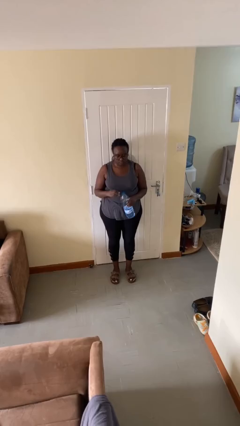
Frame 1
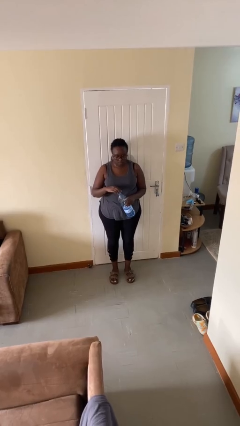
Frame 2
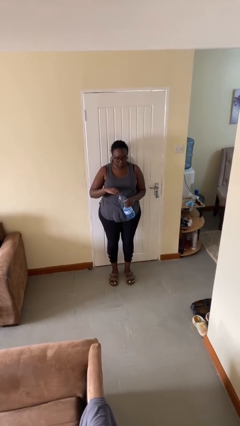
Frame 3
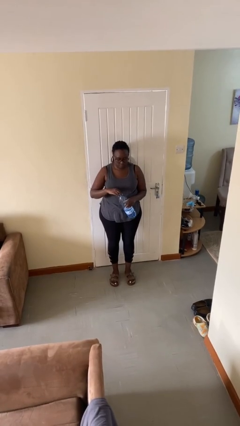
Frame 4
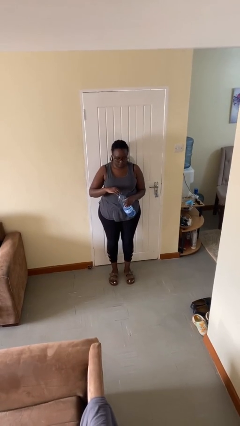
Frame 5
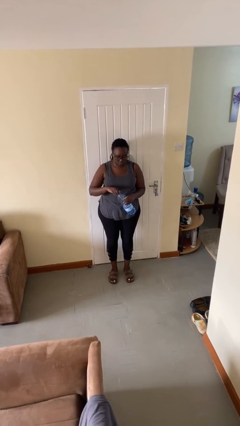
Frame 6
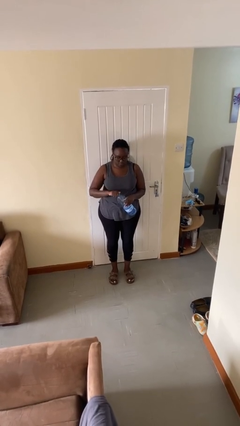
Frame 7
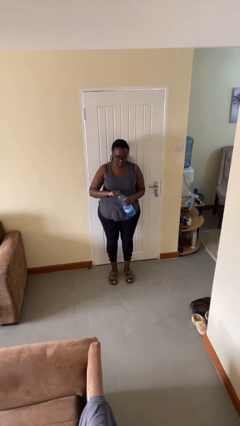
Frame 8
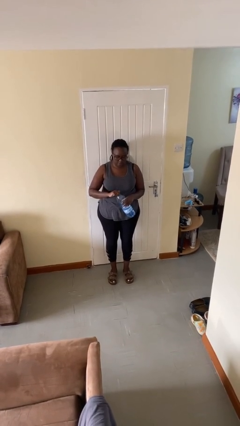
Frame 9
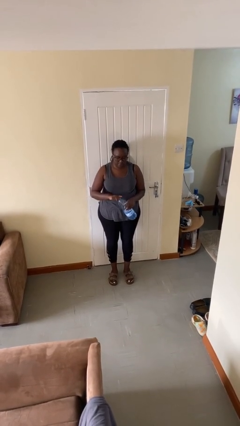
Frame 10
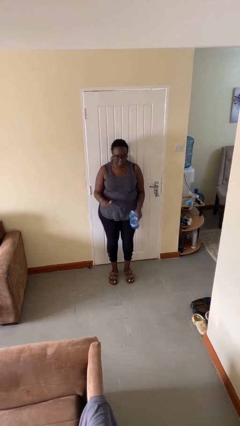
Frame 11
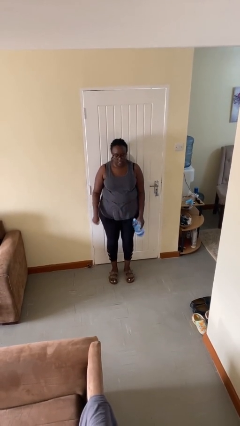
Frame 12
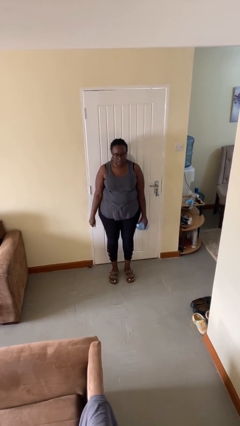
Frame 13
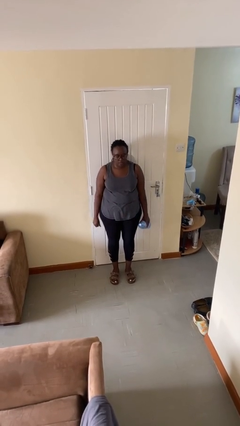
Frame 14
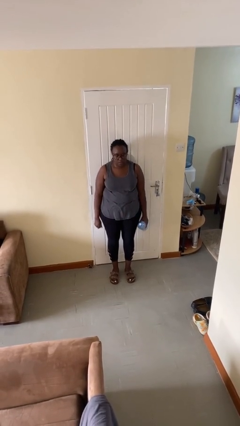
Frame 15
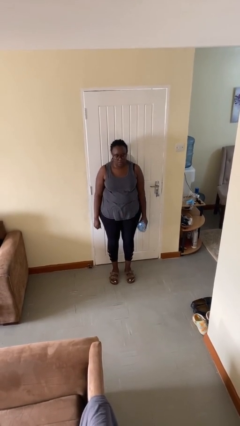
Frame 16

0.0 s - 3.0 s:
person screws lid to bottle

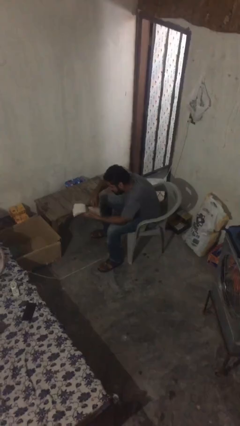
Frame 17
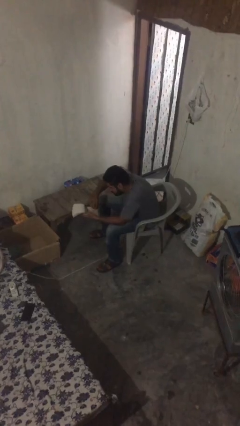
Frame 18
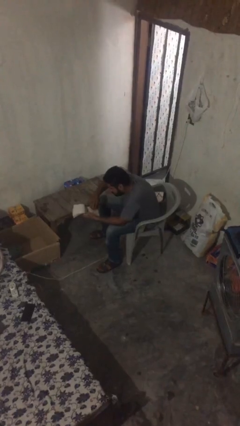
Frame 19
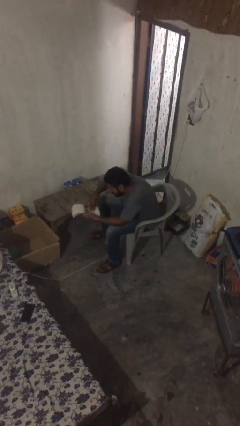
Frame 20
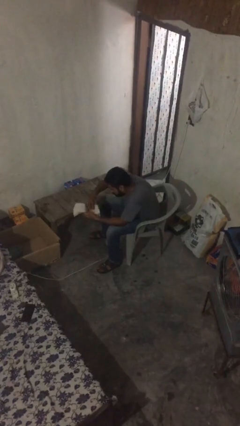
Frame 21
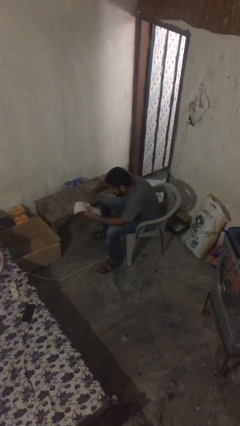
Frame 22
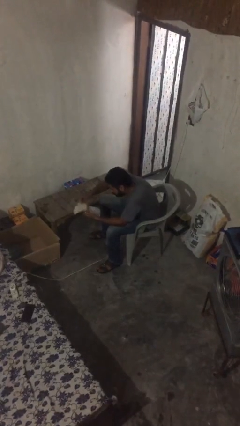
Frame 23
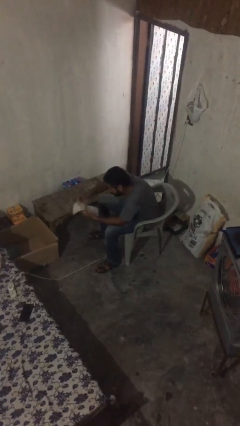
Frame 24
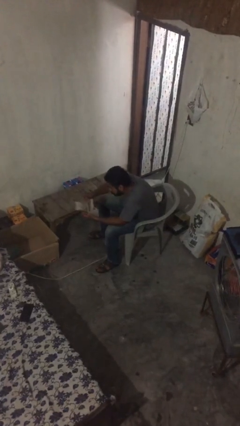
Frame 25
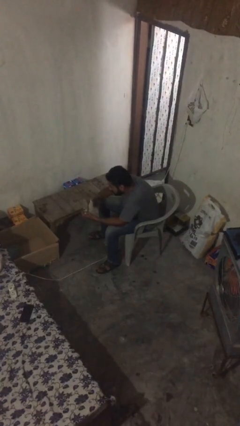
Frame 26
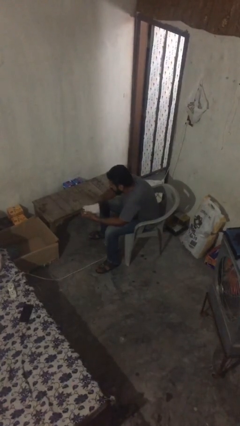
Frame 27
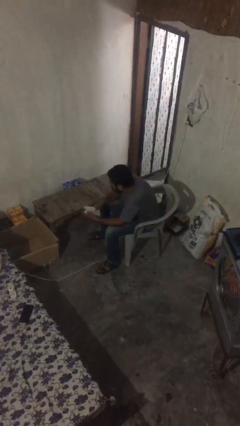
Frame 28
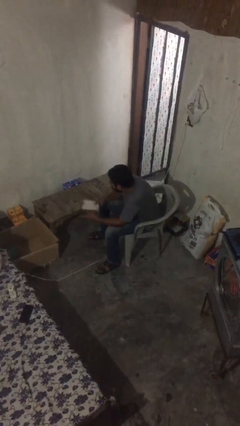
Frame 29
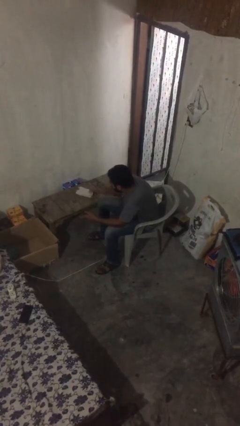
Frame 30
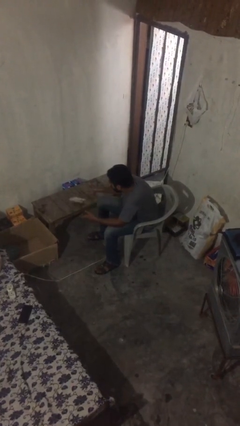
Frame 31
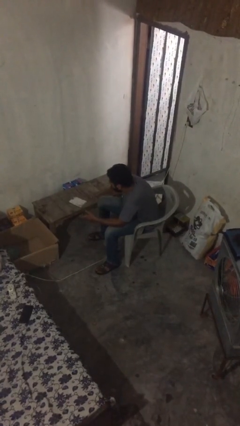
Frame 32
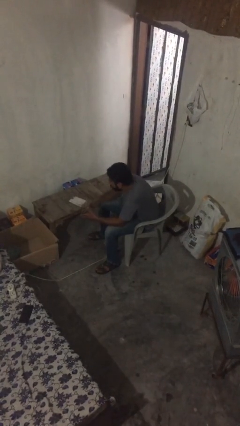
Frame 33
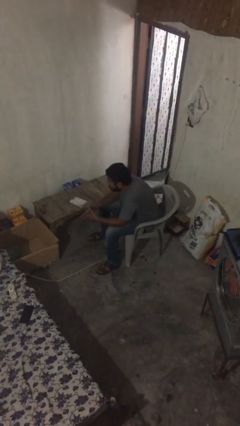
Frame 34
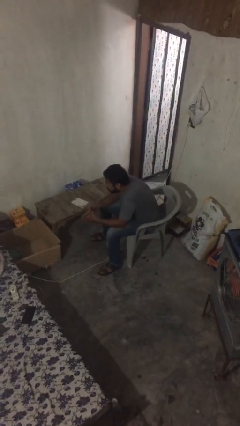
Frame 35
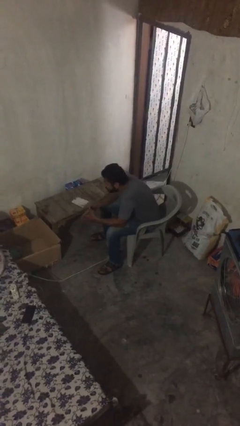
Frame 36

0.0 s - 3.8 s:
person puts down object on table

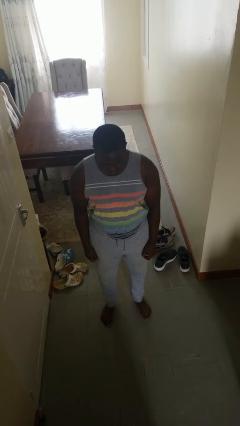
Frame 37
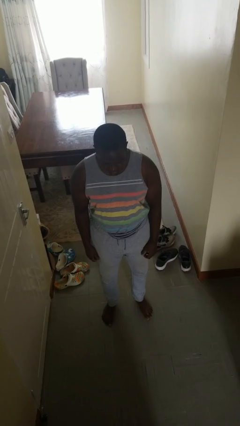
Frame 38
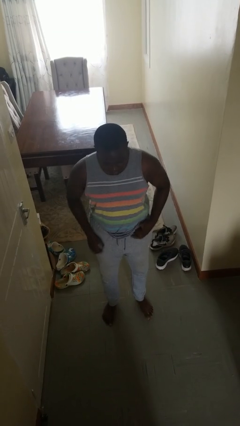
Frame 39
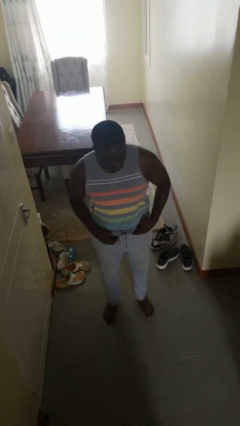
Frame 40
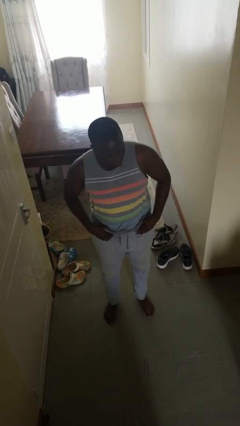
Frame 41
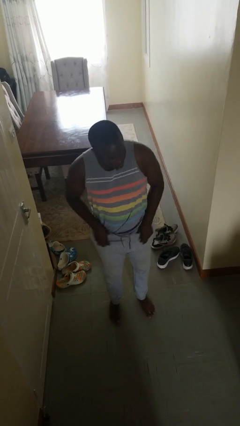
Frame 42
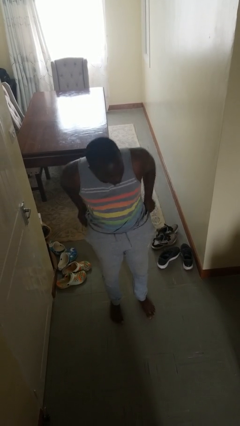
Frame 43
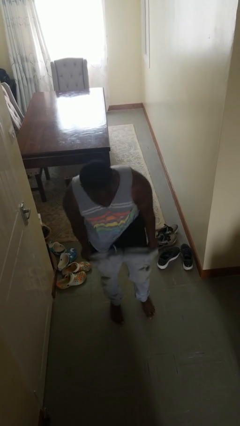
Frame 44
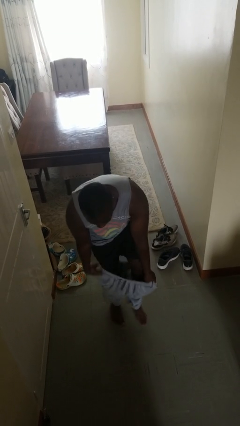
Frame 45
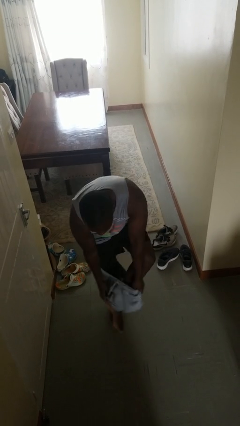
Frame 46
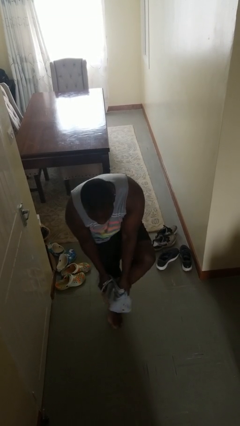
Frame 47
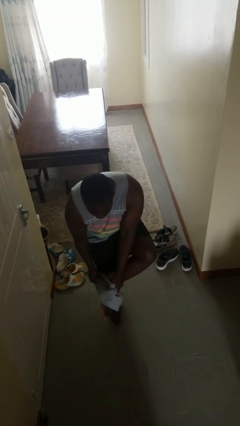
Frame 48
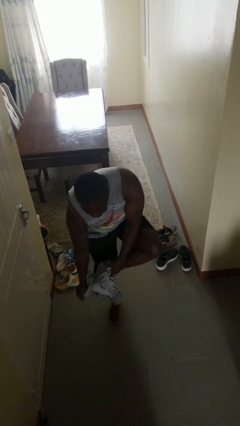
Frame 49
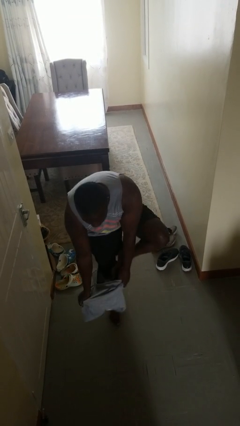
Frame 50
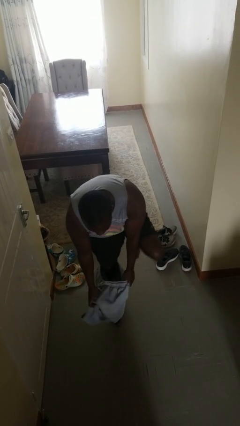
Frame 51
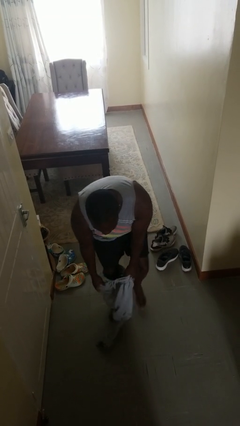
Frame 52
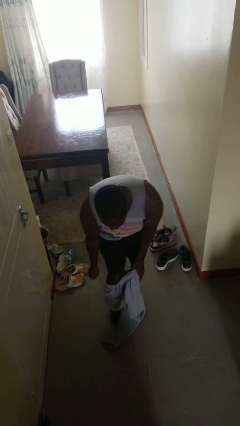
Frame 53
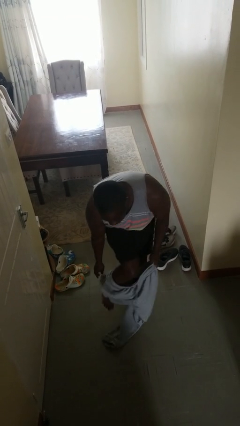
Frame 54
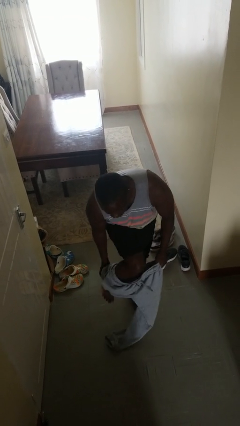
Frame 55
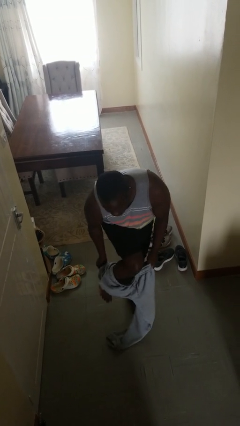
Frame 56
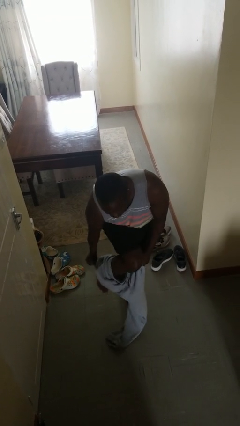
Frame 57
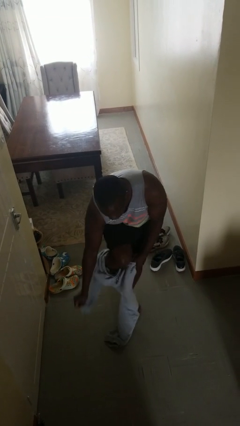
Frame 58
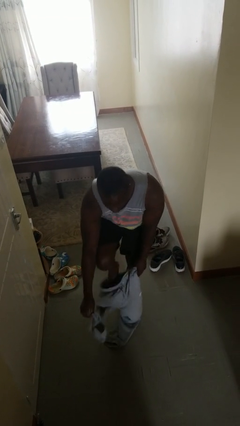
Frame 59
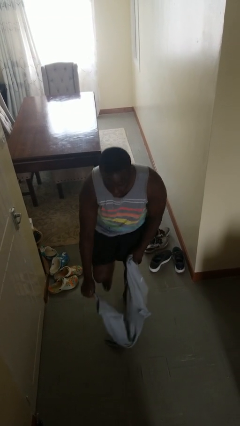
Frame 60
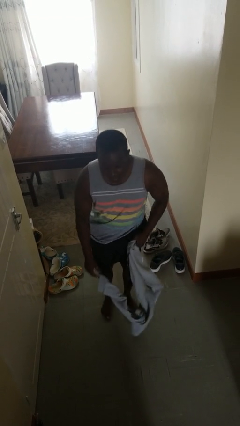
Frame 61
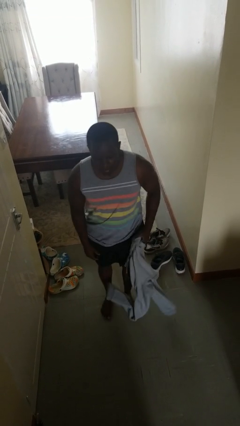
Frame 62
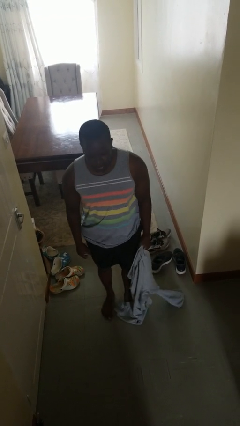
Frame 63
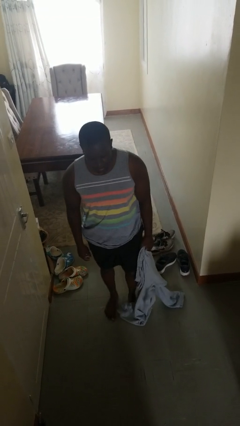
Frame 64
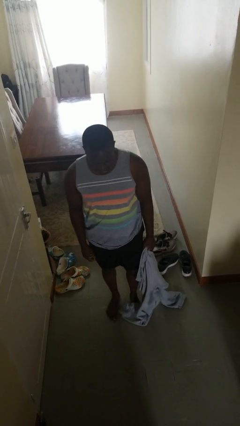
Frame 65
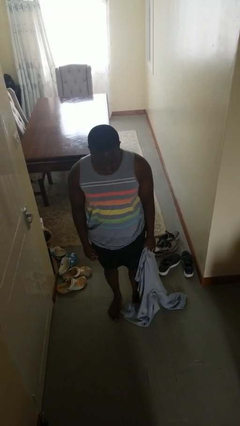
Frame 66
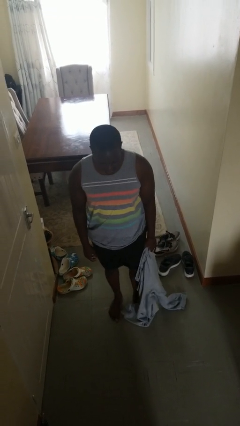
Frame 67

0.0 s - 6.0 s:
person takes off pants

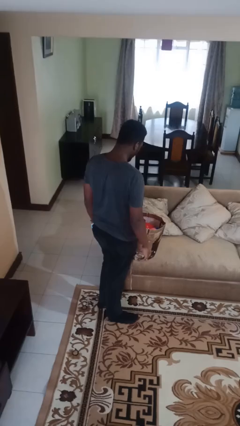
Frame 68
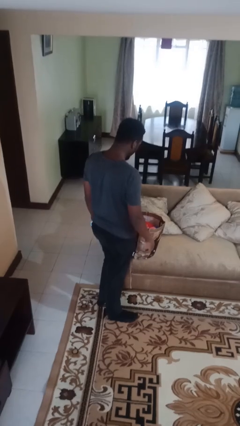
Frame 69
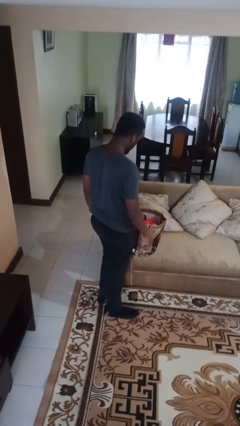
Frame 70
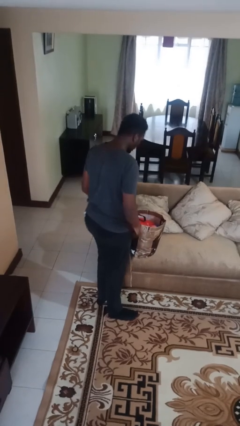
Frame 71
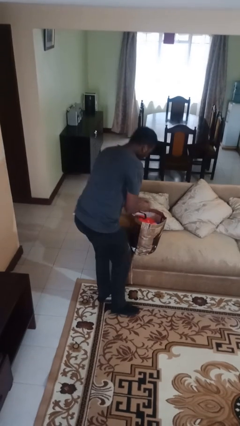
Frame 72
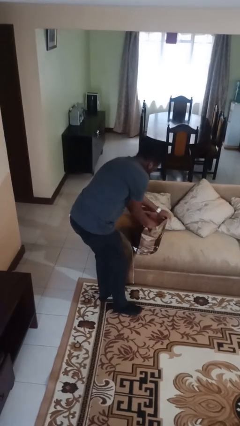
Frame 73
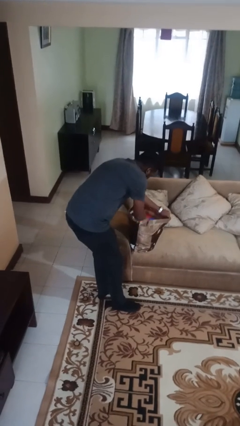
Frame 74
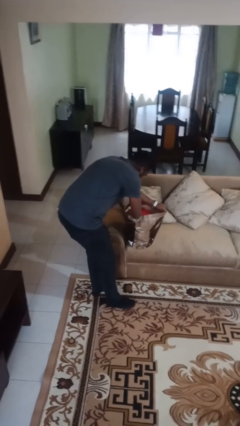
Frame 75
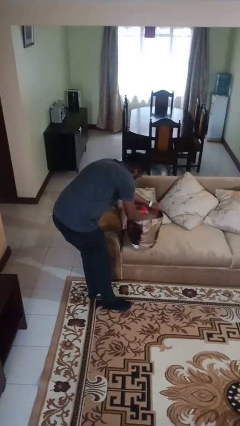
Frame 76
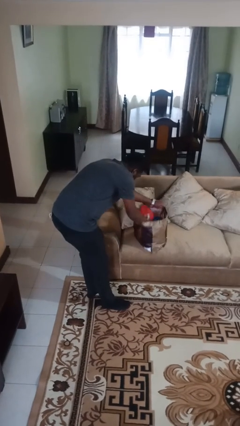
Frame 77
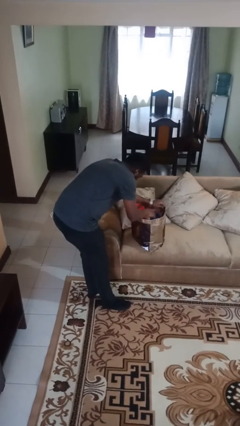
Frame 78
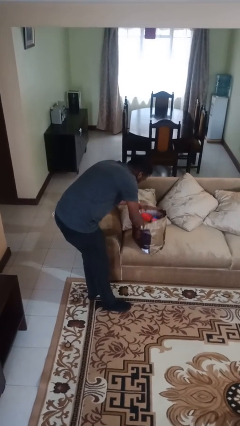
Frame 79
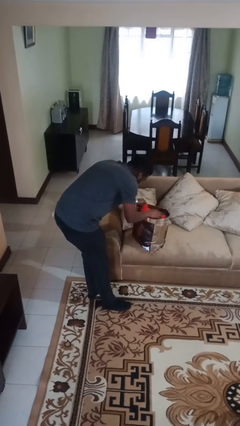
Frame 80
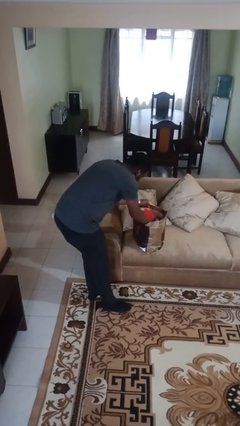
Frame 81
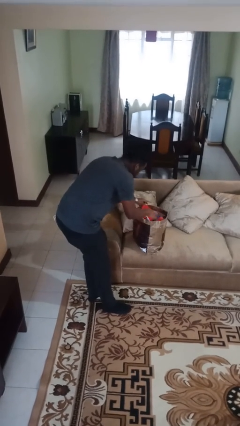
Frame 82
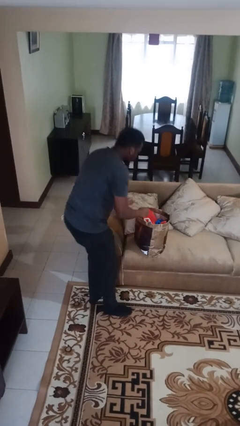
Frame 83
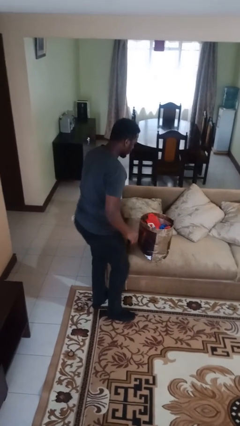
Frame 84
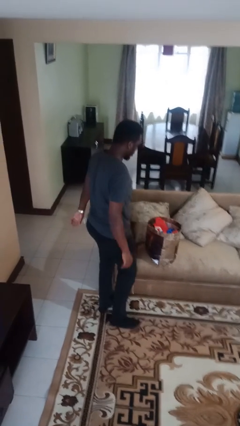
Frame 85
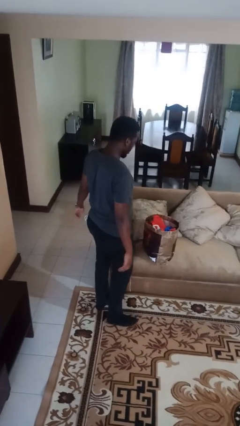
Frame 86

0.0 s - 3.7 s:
person searches in bag

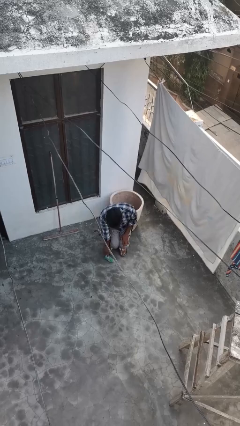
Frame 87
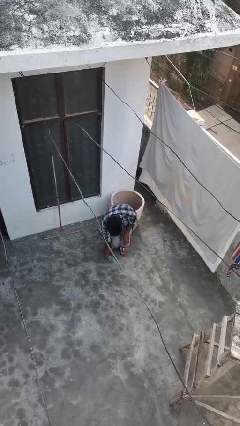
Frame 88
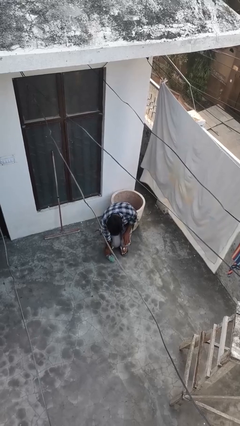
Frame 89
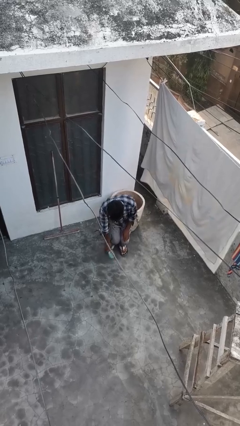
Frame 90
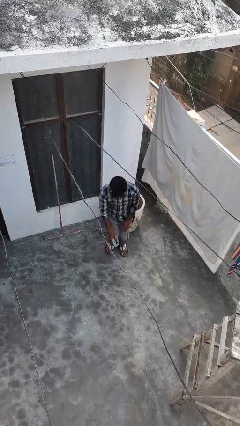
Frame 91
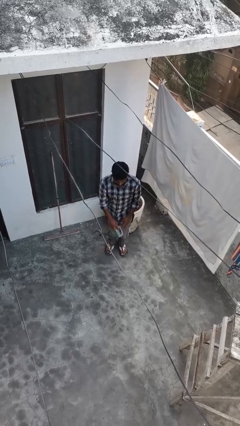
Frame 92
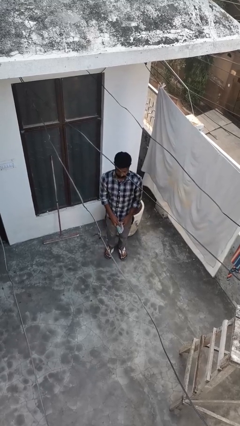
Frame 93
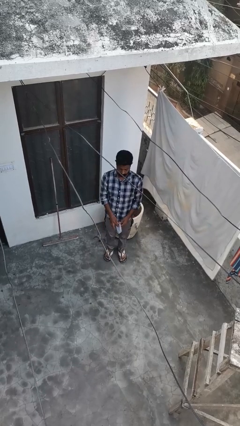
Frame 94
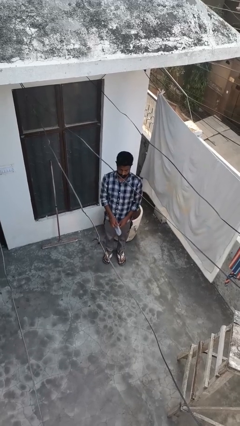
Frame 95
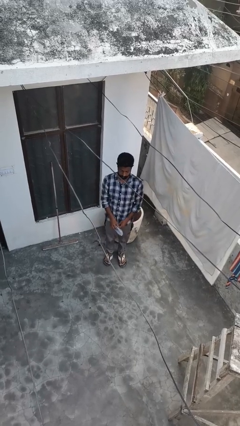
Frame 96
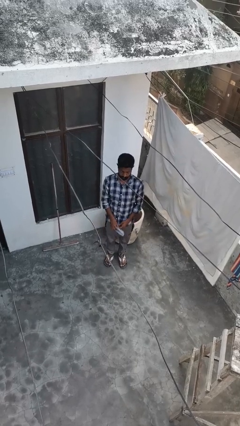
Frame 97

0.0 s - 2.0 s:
person picks up object from floor
